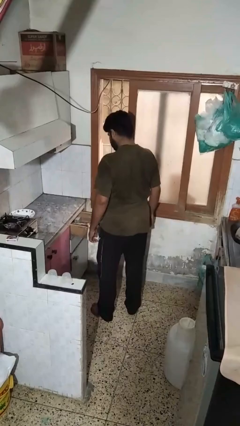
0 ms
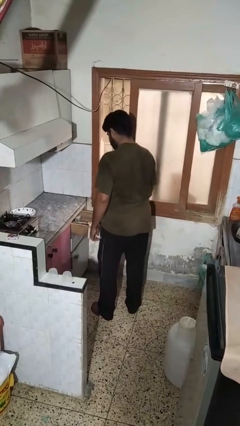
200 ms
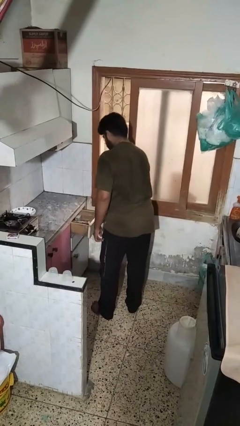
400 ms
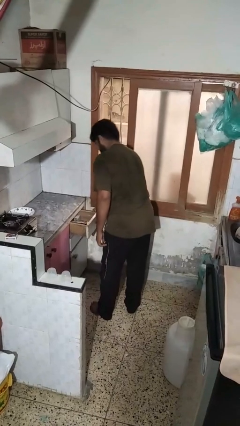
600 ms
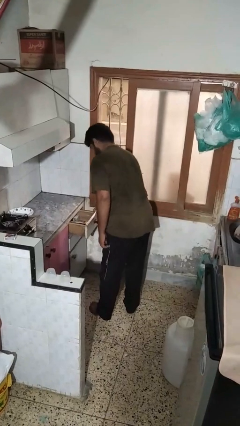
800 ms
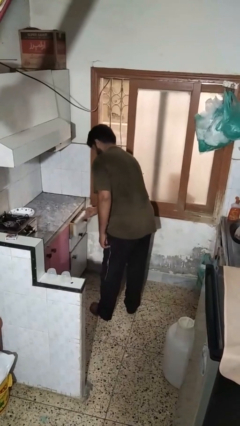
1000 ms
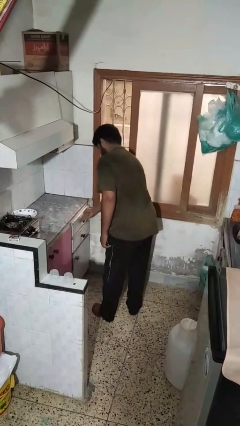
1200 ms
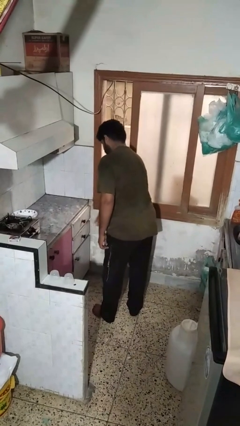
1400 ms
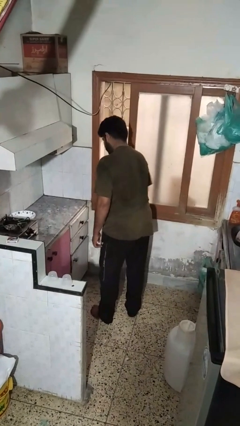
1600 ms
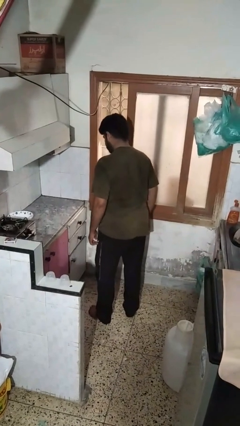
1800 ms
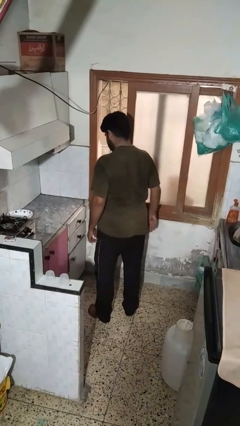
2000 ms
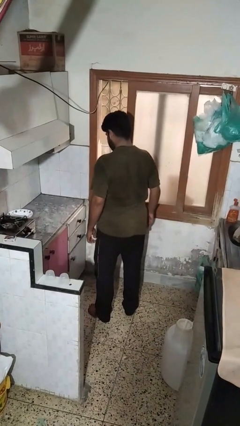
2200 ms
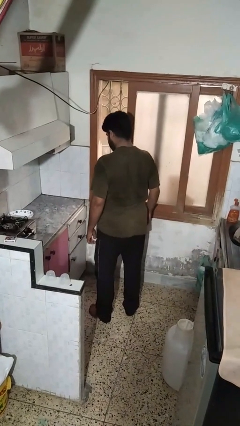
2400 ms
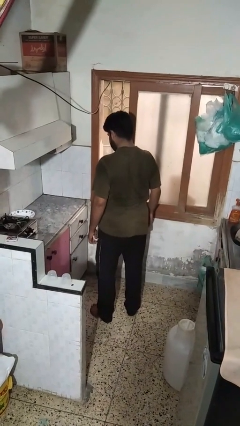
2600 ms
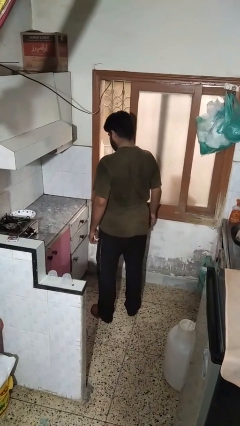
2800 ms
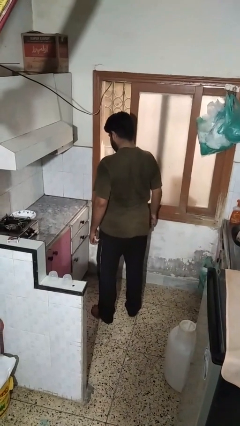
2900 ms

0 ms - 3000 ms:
person closes kitchen drawer

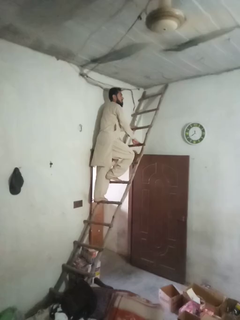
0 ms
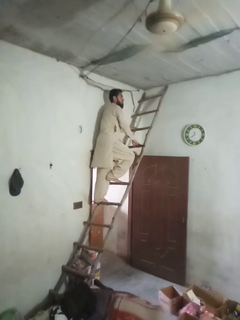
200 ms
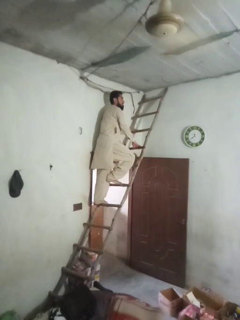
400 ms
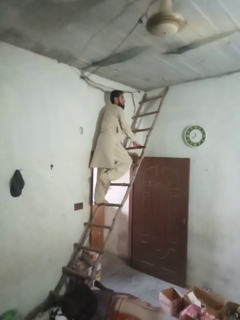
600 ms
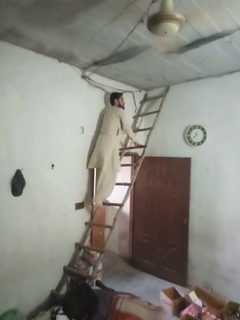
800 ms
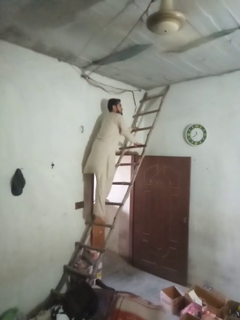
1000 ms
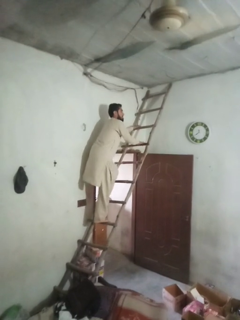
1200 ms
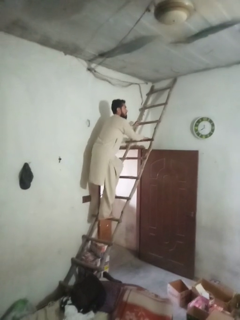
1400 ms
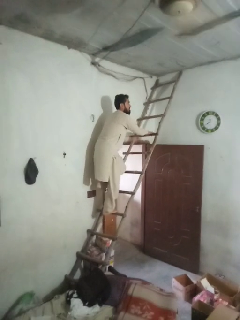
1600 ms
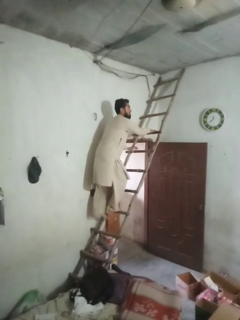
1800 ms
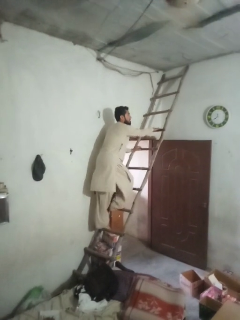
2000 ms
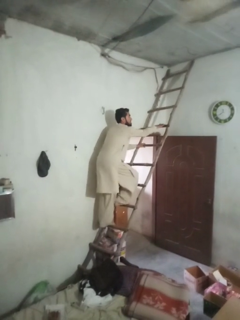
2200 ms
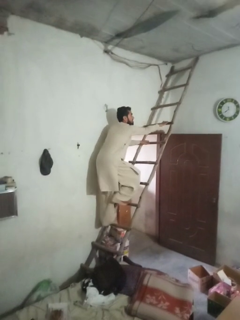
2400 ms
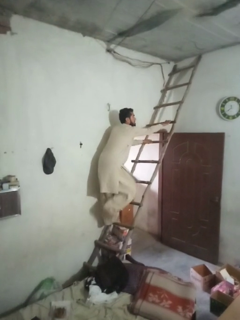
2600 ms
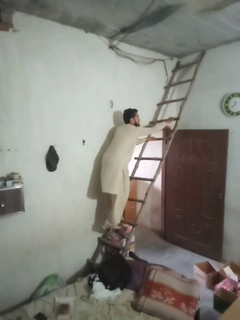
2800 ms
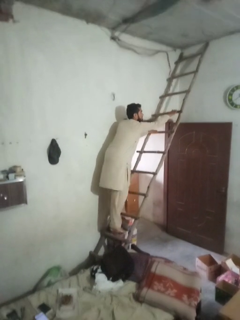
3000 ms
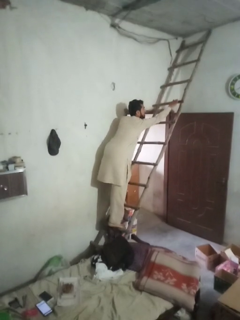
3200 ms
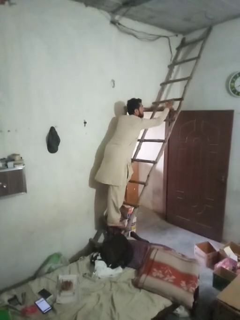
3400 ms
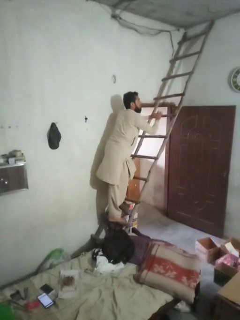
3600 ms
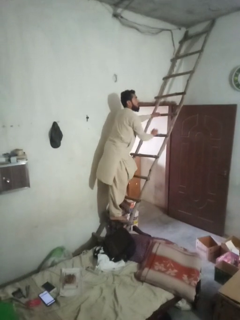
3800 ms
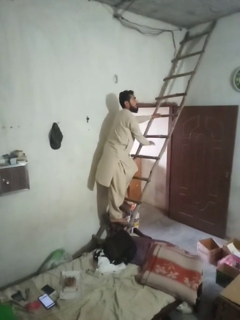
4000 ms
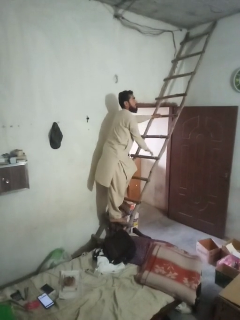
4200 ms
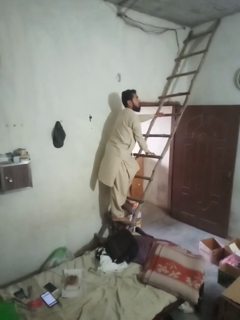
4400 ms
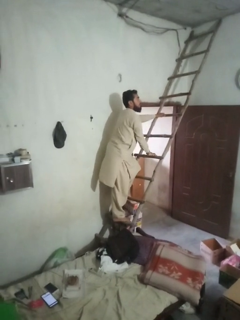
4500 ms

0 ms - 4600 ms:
person climbs down ladder

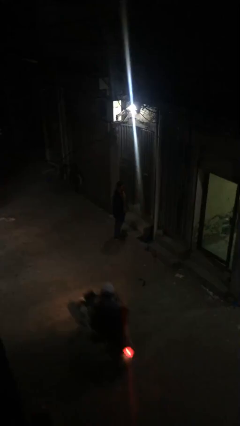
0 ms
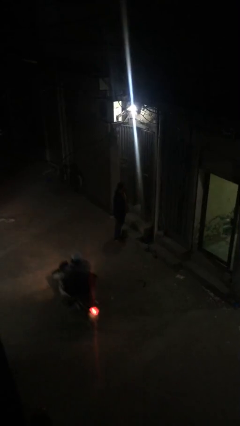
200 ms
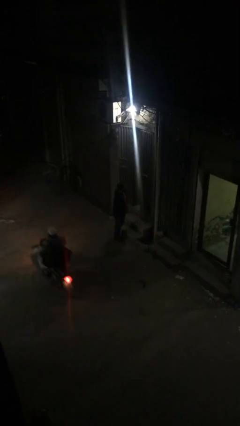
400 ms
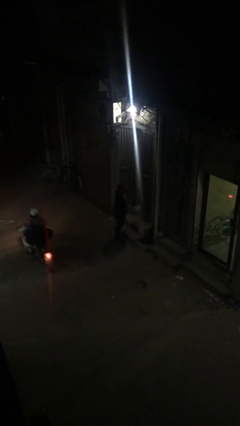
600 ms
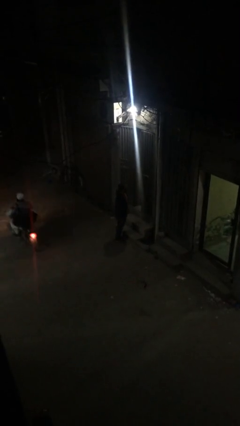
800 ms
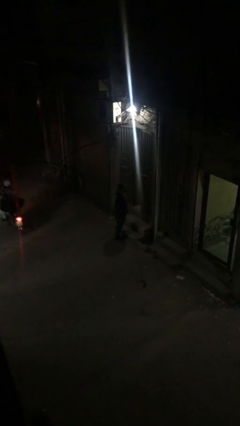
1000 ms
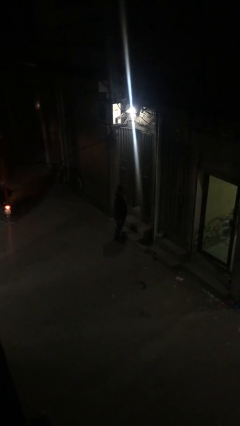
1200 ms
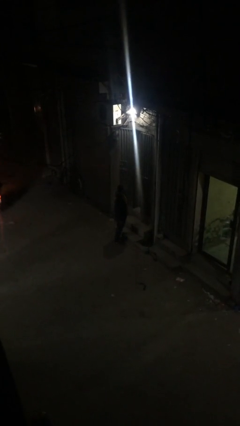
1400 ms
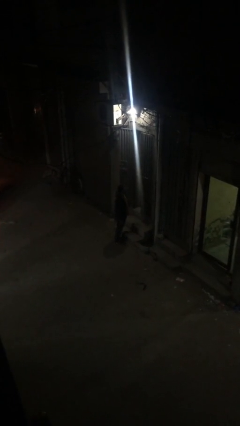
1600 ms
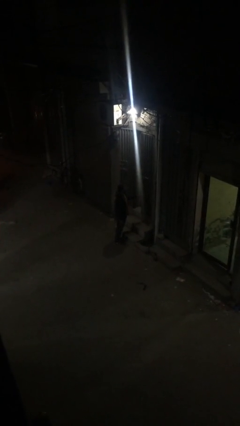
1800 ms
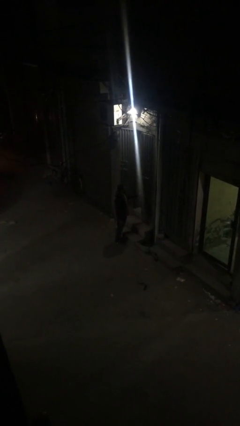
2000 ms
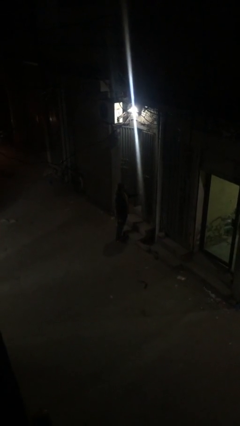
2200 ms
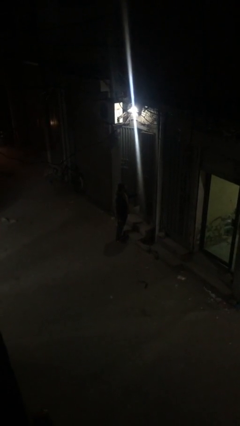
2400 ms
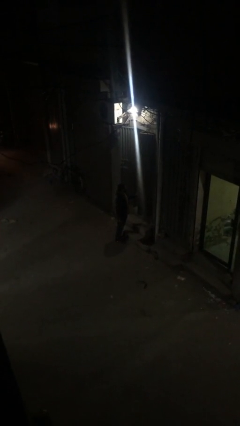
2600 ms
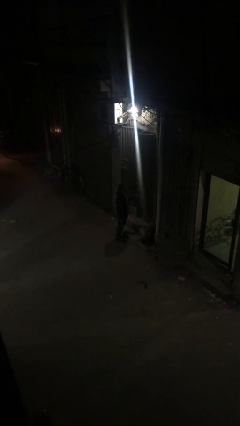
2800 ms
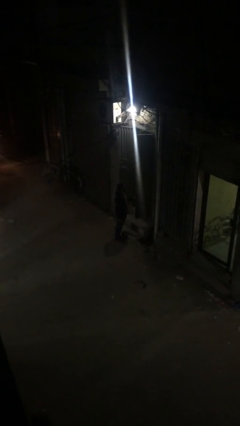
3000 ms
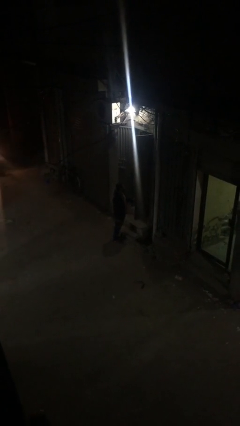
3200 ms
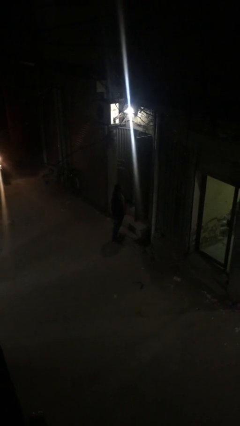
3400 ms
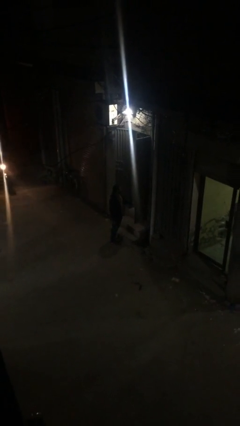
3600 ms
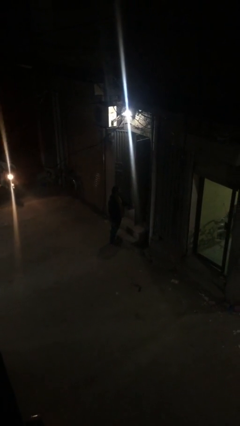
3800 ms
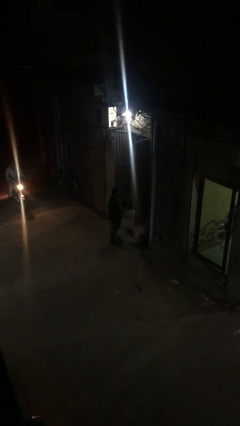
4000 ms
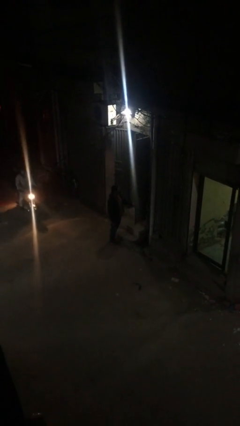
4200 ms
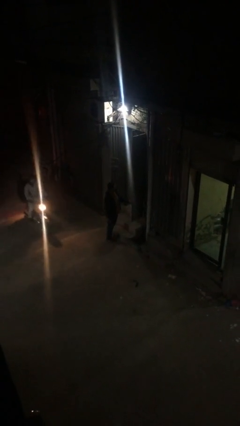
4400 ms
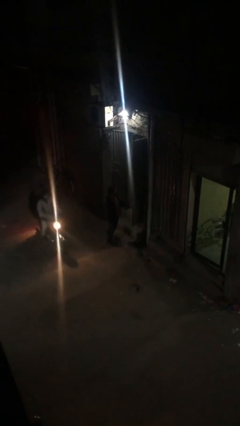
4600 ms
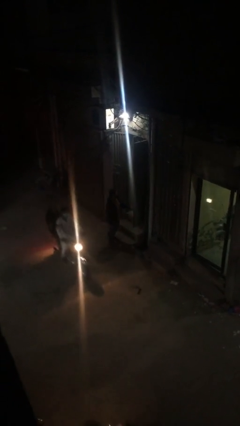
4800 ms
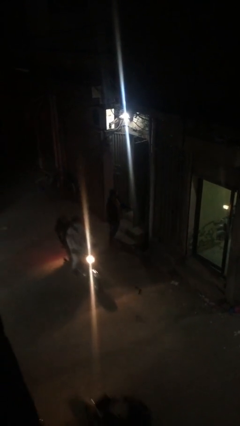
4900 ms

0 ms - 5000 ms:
person opens facility door

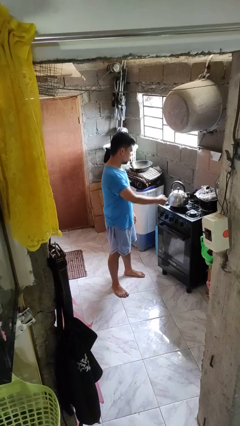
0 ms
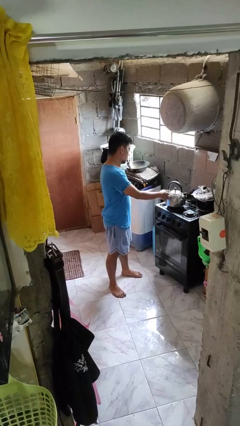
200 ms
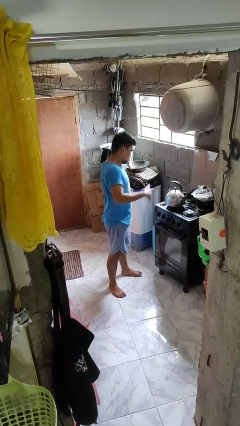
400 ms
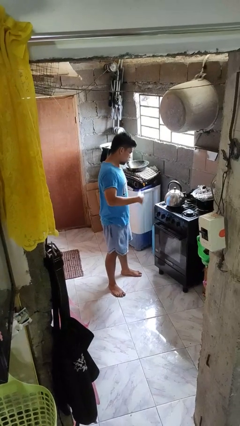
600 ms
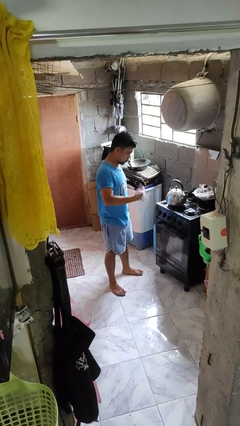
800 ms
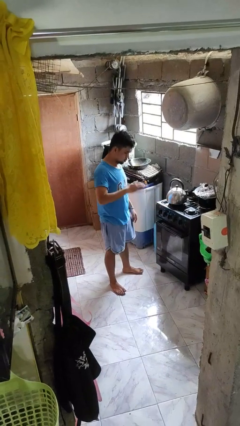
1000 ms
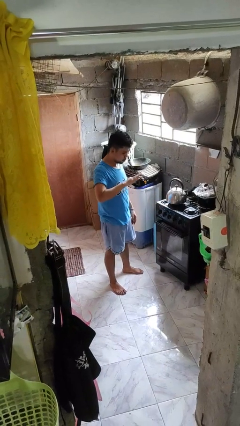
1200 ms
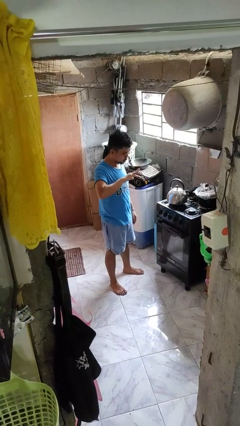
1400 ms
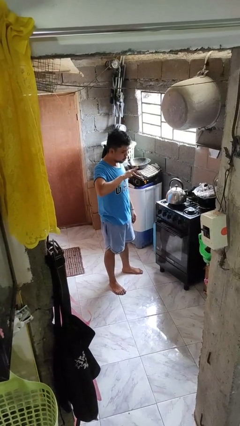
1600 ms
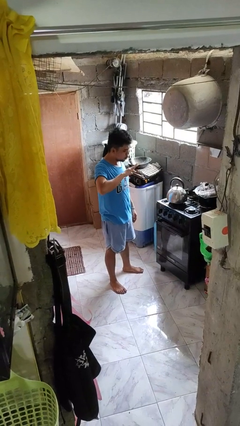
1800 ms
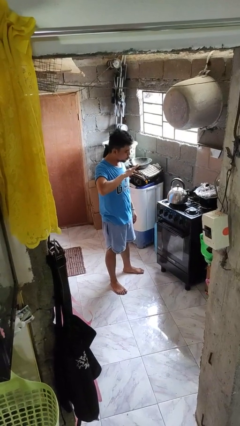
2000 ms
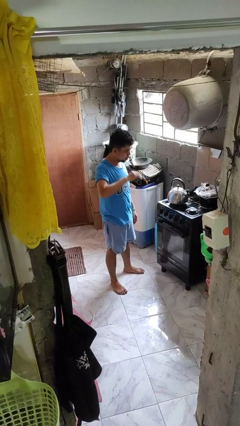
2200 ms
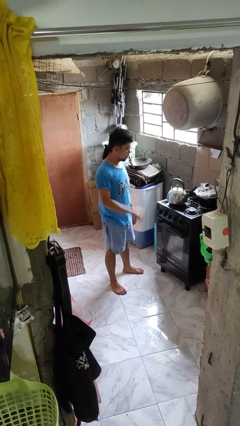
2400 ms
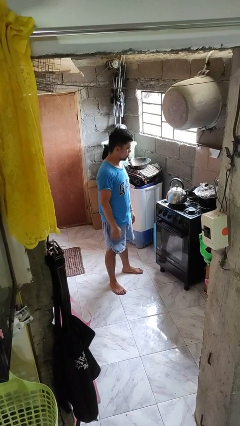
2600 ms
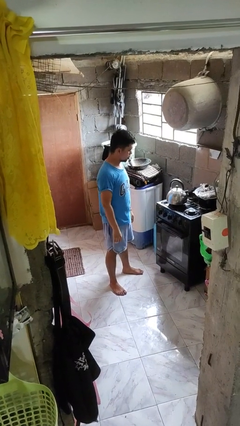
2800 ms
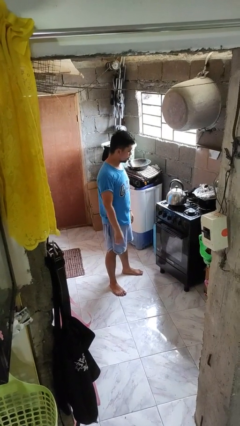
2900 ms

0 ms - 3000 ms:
person burns hand

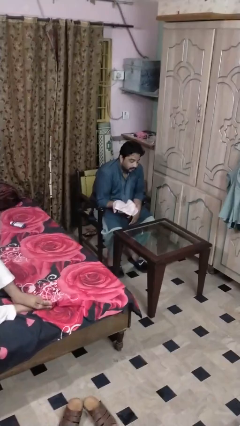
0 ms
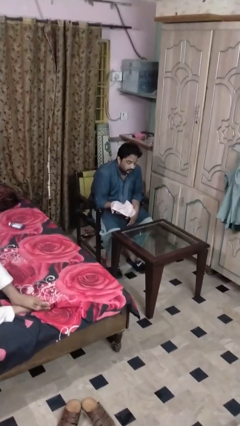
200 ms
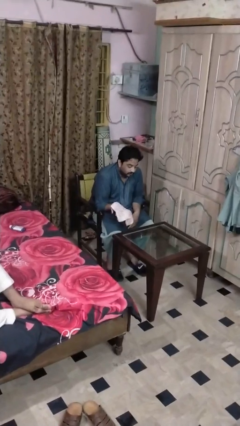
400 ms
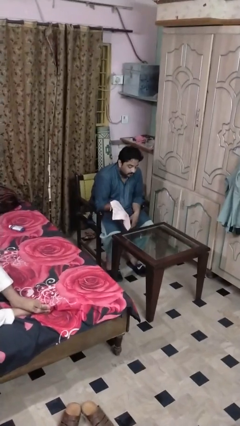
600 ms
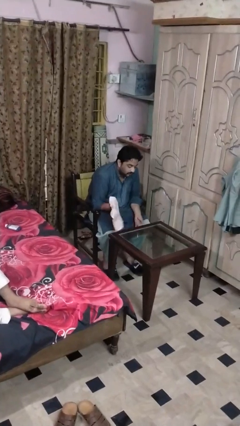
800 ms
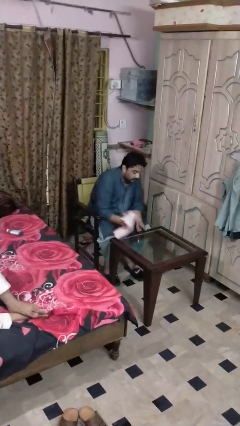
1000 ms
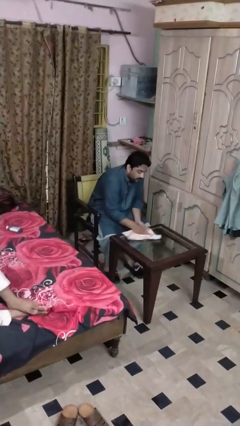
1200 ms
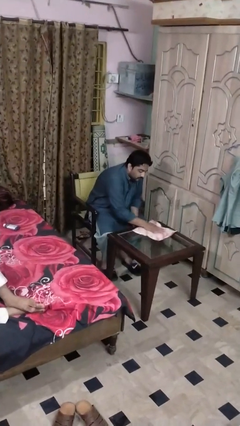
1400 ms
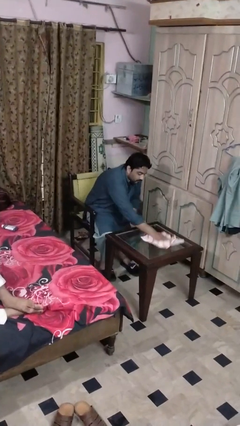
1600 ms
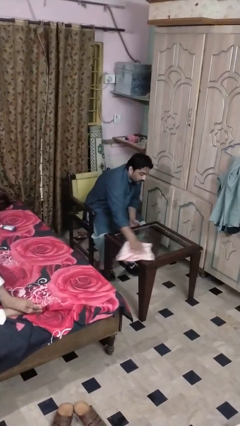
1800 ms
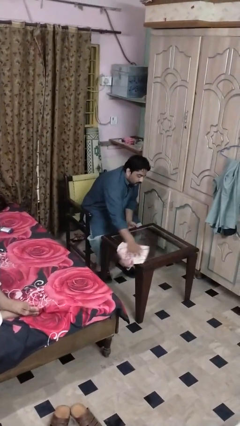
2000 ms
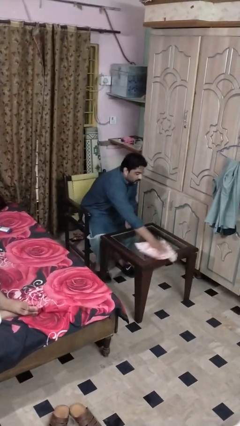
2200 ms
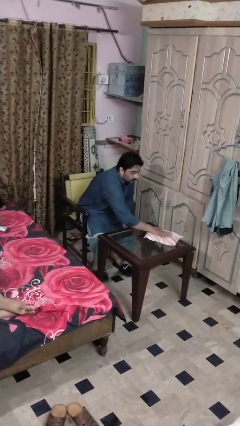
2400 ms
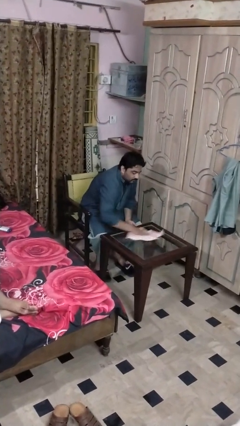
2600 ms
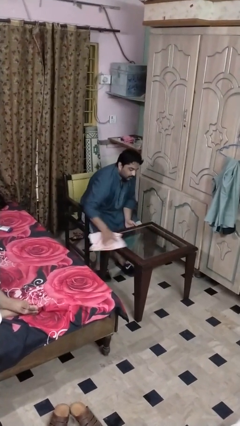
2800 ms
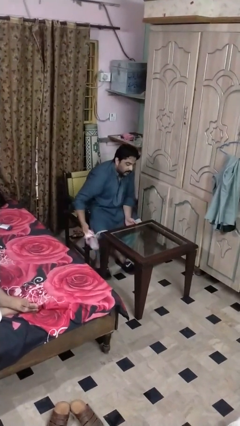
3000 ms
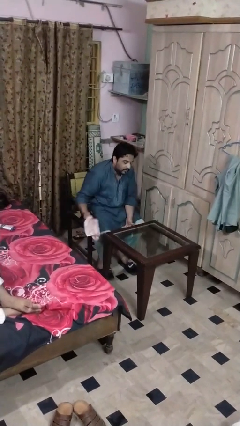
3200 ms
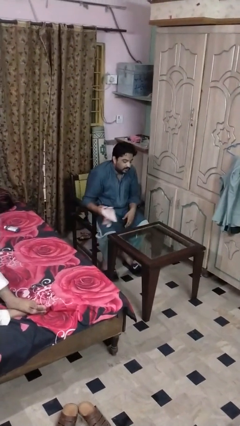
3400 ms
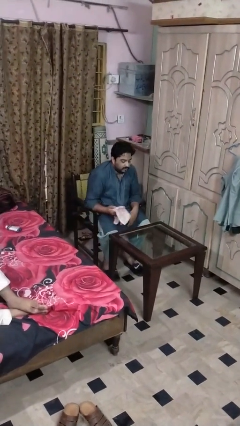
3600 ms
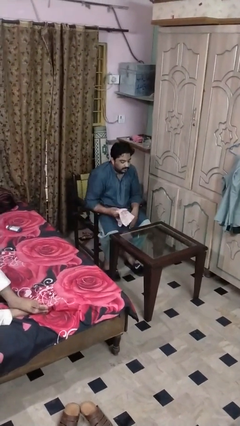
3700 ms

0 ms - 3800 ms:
person cleans table with rag
